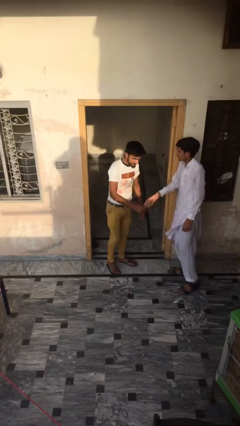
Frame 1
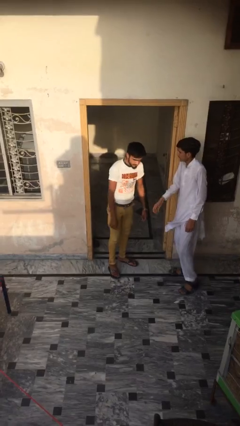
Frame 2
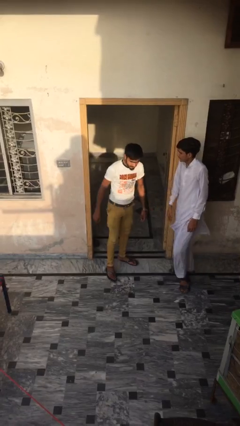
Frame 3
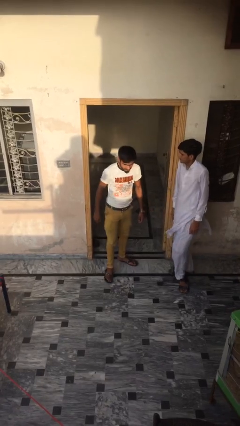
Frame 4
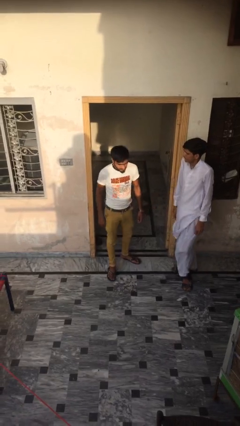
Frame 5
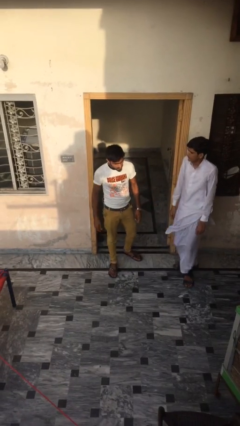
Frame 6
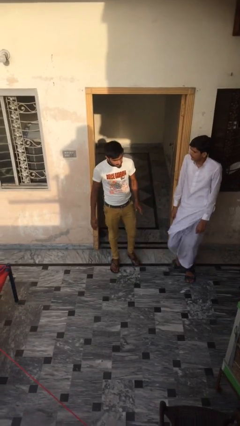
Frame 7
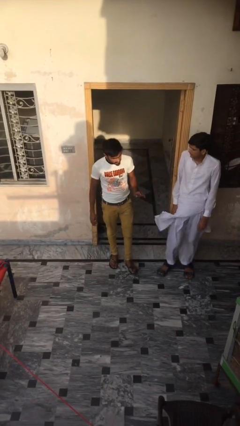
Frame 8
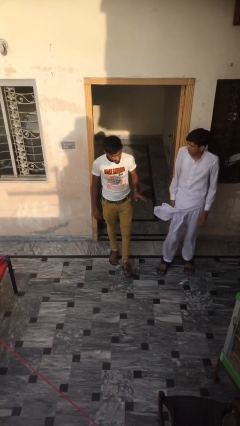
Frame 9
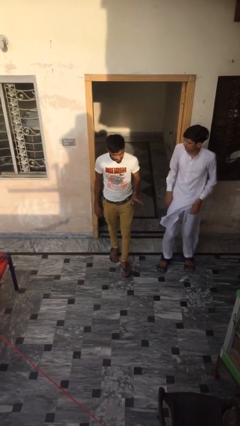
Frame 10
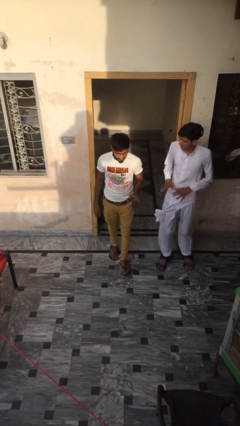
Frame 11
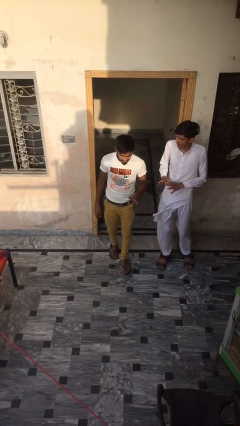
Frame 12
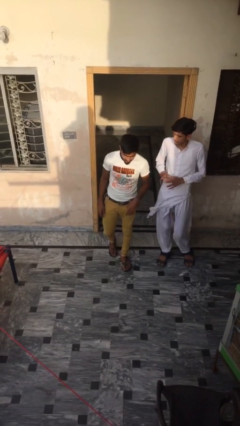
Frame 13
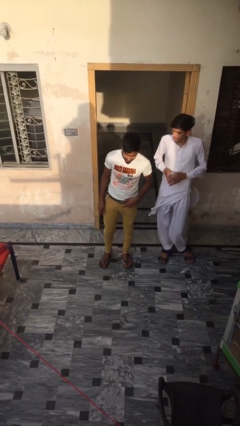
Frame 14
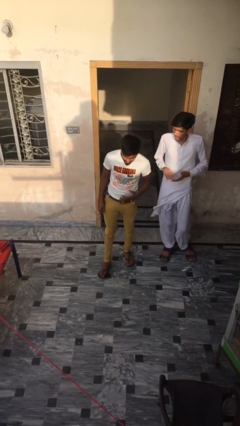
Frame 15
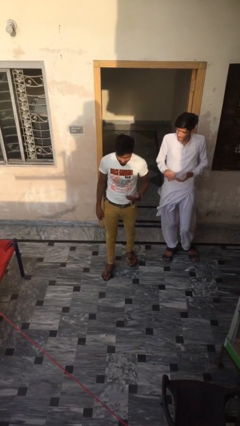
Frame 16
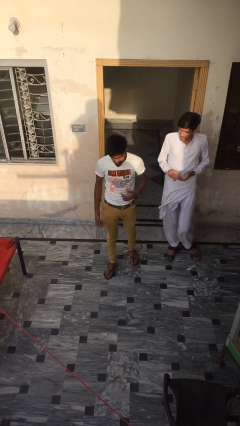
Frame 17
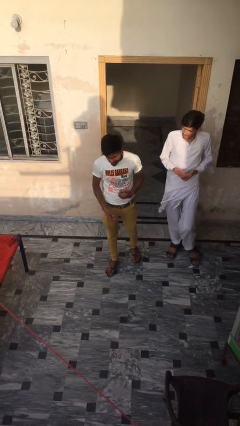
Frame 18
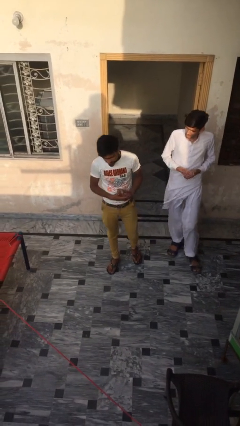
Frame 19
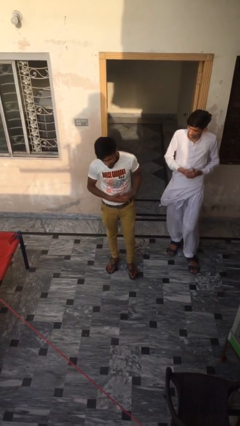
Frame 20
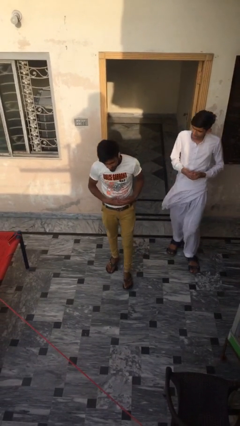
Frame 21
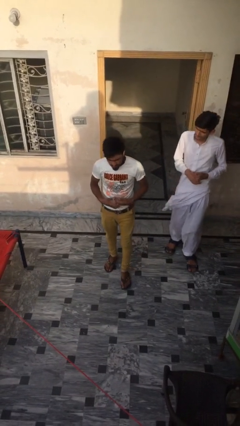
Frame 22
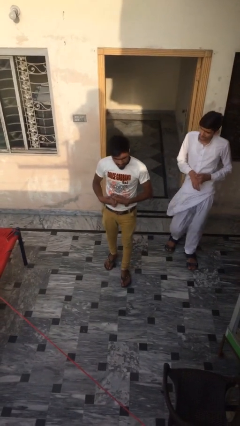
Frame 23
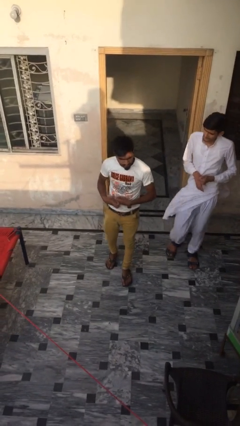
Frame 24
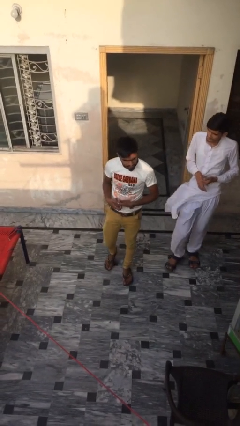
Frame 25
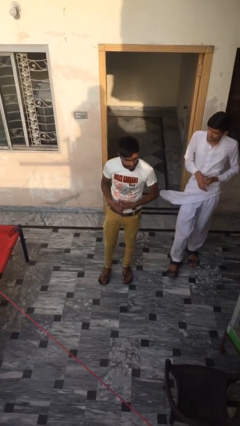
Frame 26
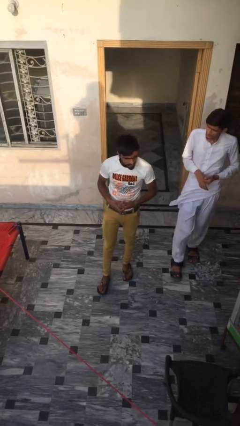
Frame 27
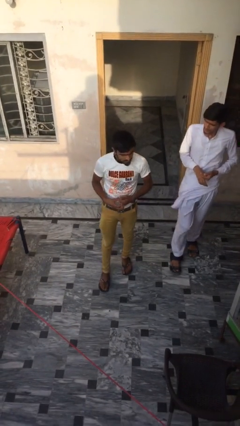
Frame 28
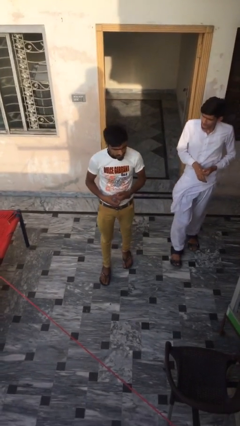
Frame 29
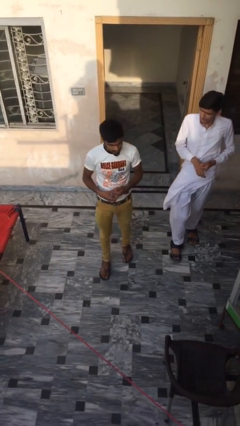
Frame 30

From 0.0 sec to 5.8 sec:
person talks to person

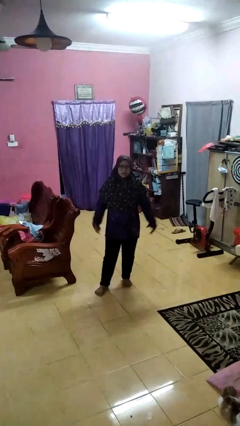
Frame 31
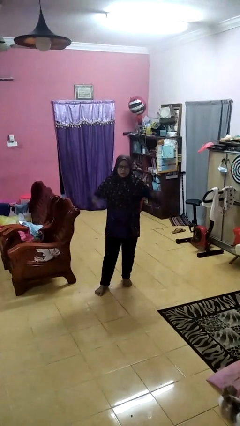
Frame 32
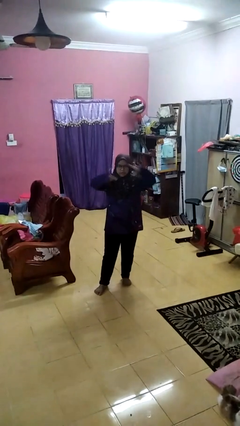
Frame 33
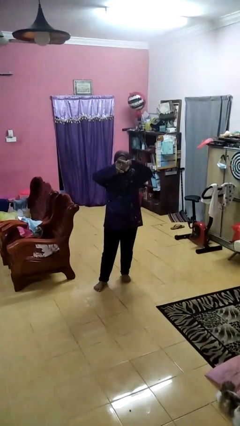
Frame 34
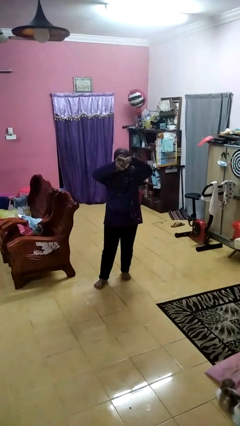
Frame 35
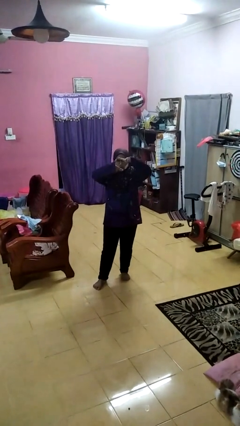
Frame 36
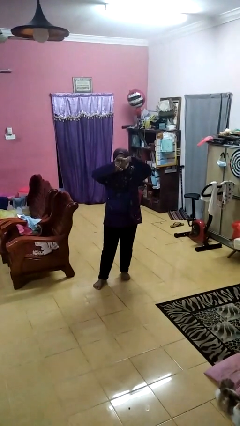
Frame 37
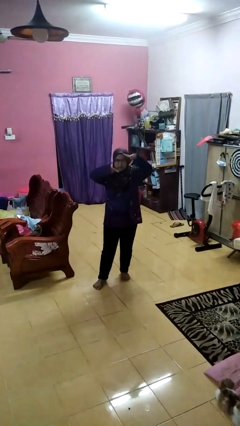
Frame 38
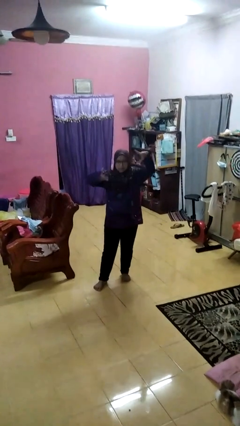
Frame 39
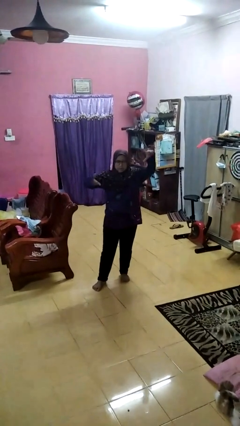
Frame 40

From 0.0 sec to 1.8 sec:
person gestures zoom in

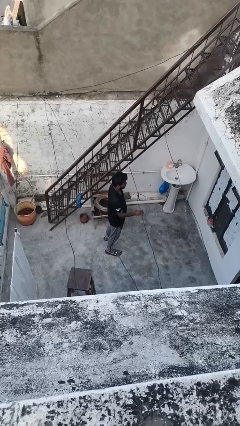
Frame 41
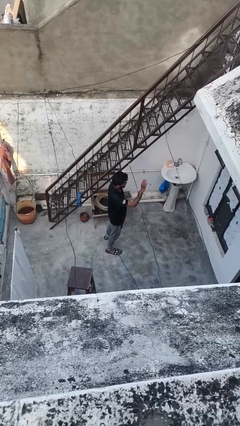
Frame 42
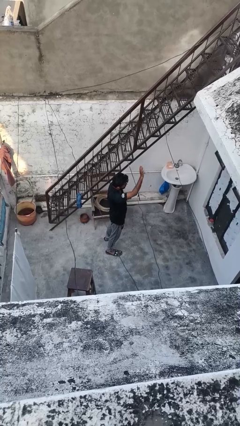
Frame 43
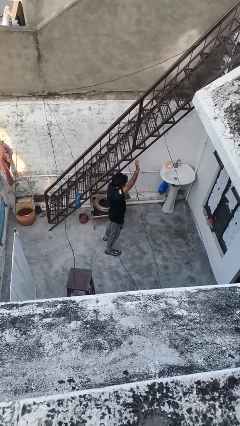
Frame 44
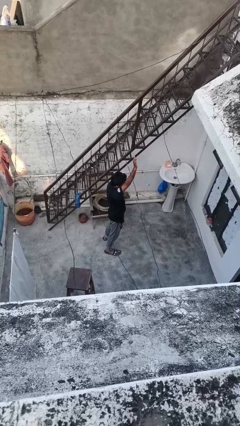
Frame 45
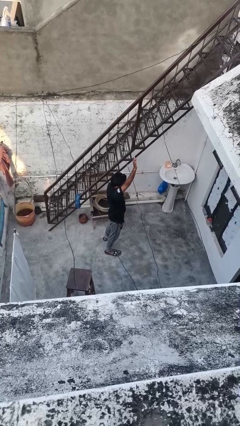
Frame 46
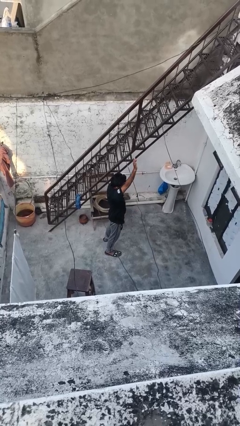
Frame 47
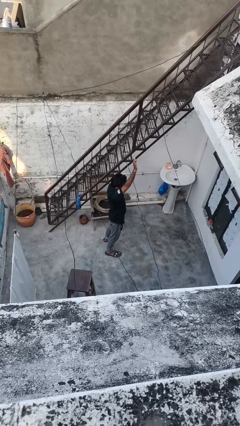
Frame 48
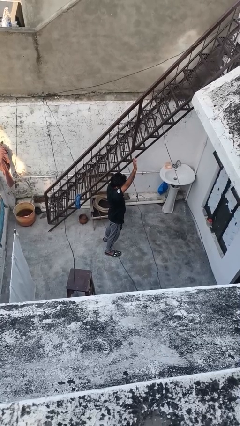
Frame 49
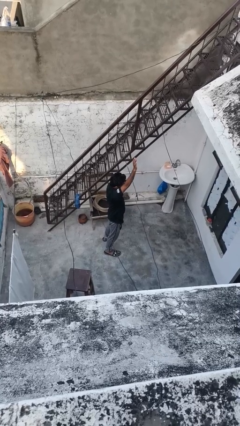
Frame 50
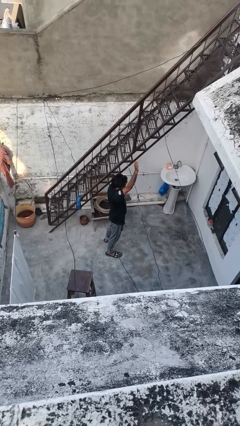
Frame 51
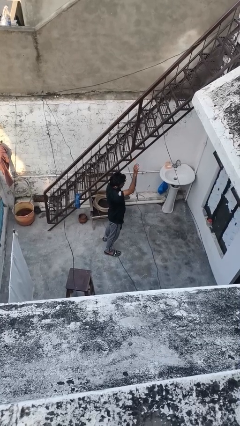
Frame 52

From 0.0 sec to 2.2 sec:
person gestures raise hand

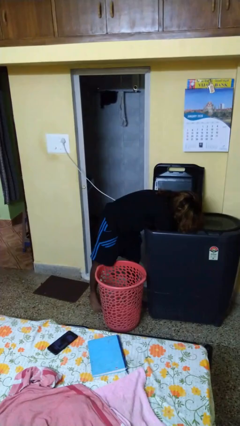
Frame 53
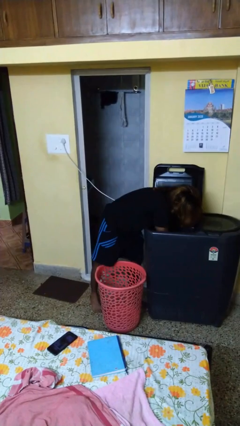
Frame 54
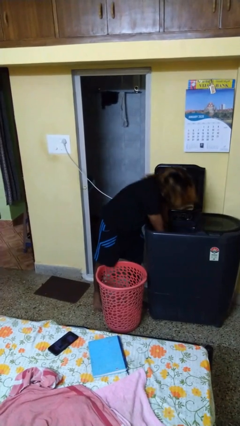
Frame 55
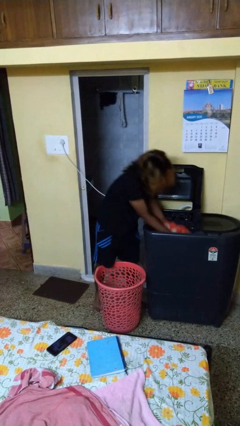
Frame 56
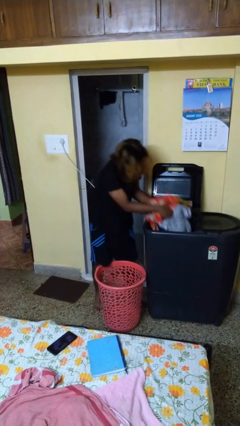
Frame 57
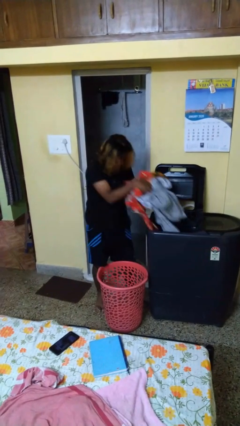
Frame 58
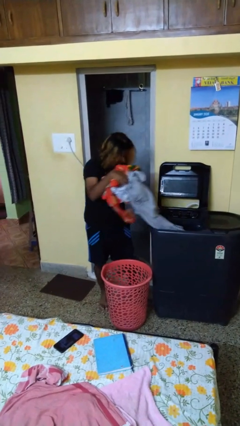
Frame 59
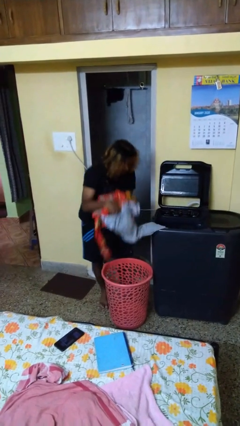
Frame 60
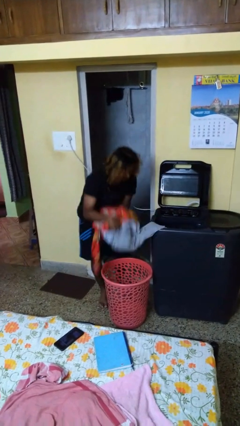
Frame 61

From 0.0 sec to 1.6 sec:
person unloads clotheswasher

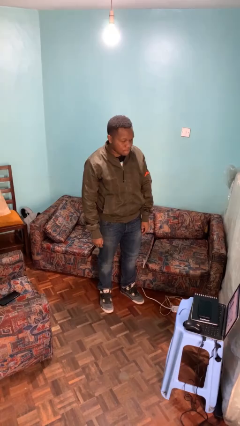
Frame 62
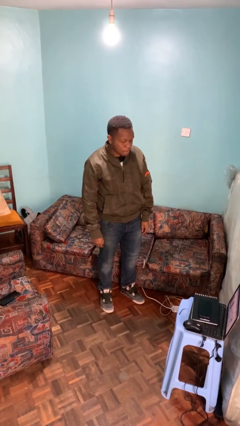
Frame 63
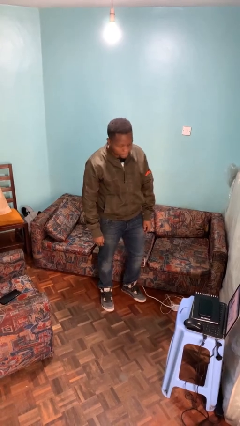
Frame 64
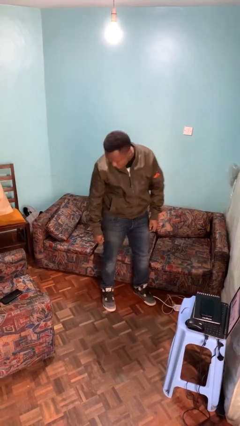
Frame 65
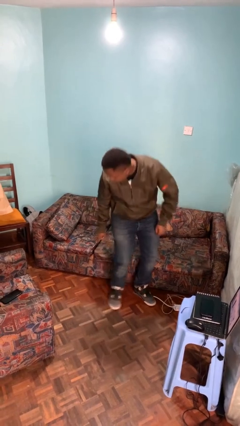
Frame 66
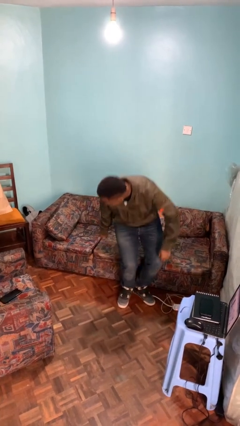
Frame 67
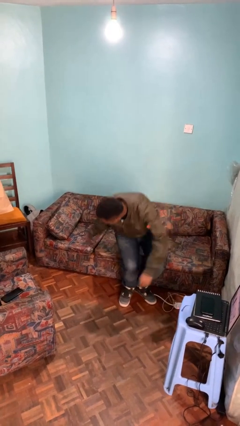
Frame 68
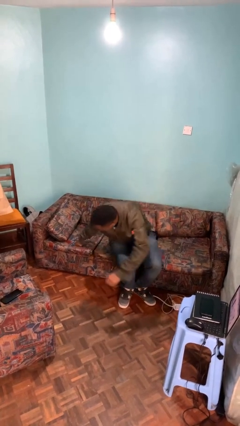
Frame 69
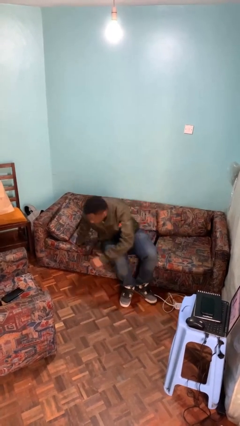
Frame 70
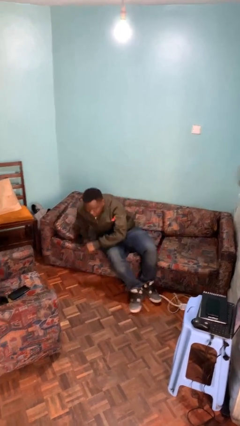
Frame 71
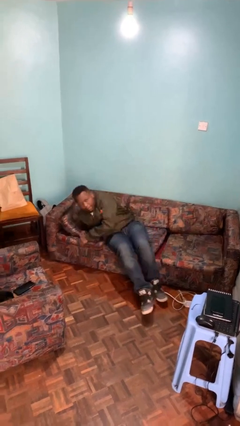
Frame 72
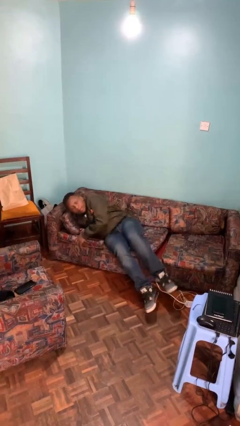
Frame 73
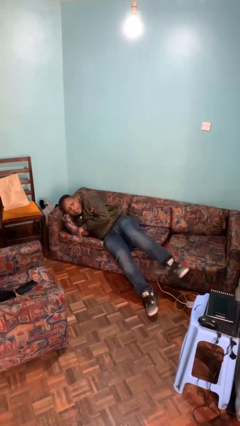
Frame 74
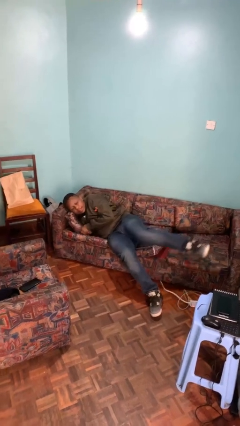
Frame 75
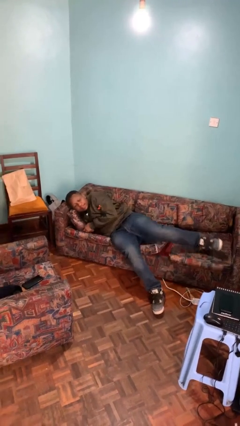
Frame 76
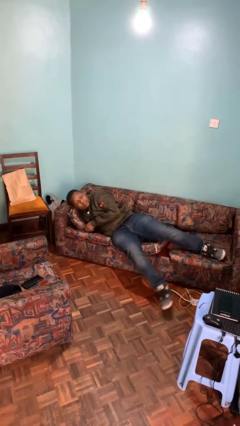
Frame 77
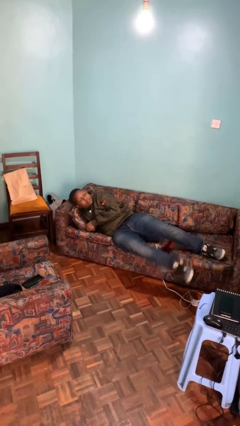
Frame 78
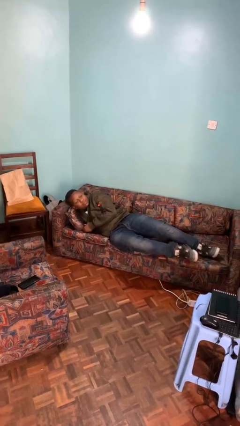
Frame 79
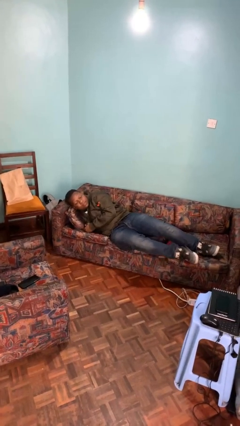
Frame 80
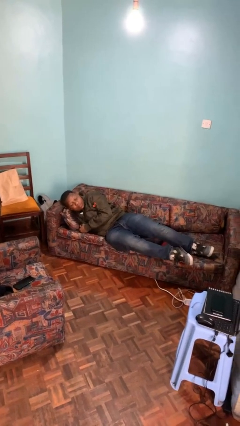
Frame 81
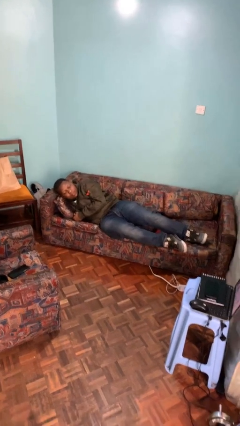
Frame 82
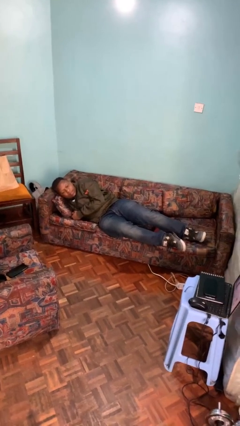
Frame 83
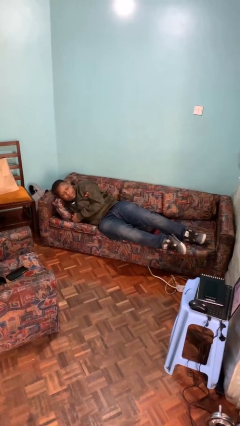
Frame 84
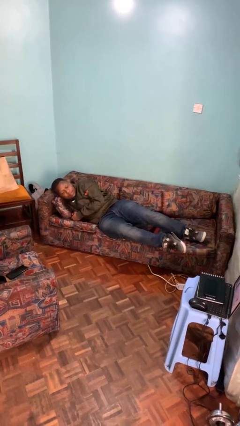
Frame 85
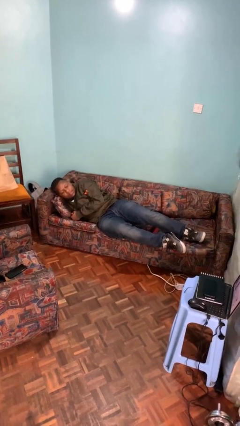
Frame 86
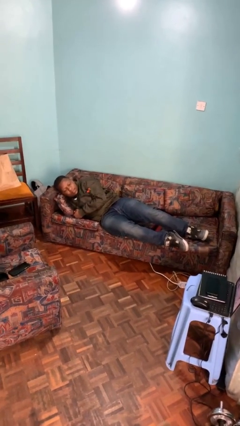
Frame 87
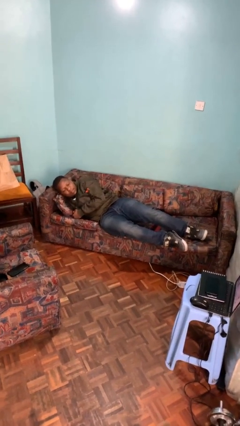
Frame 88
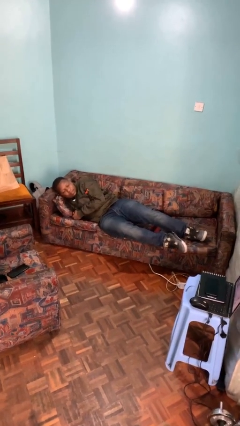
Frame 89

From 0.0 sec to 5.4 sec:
person lies down on couch

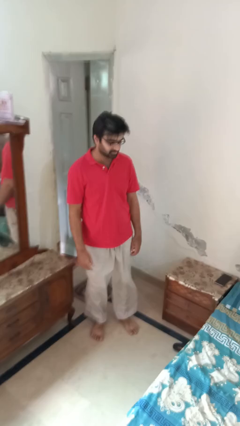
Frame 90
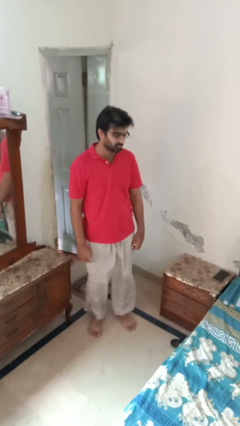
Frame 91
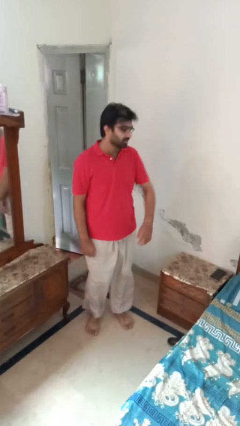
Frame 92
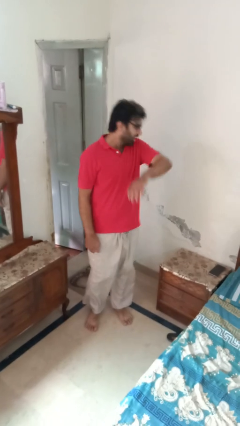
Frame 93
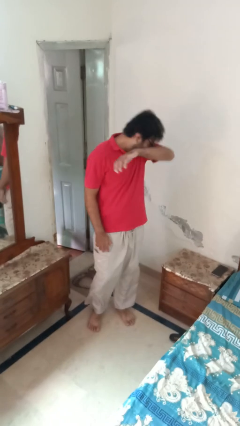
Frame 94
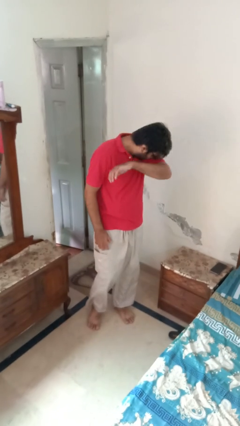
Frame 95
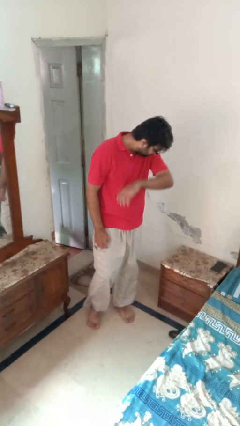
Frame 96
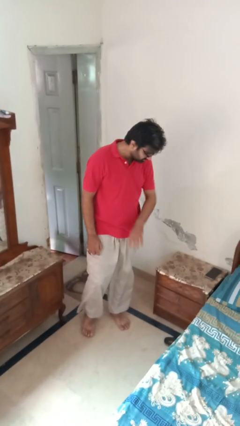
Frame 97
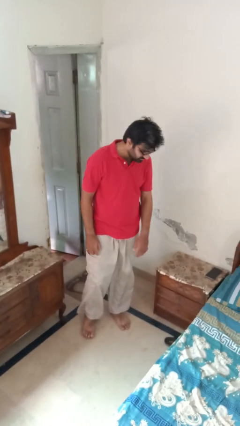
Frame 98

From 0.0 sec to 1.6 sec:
person sneezes into arm
